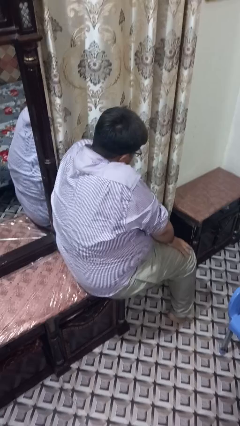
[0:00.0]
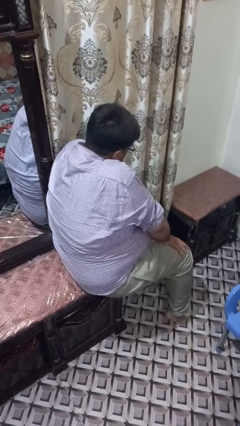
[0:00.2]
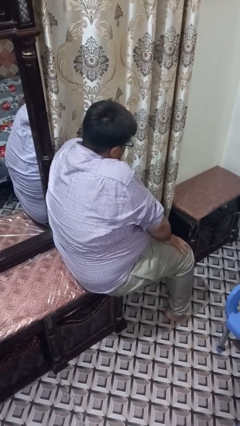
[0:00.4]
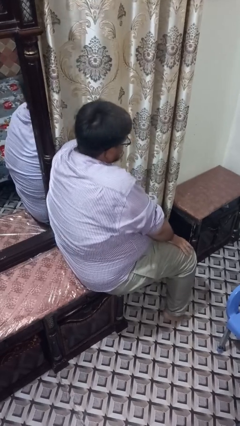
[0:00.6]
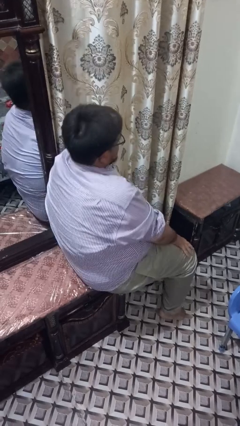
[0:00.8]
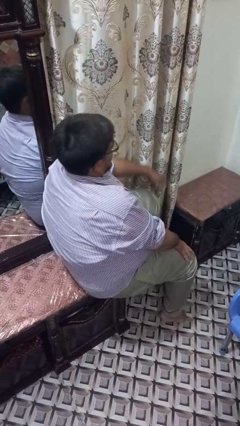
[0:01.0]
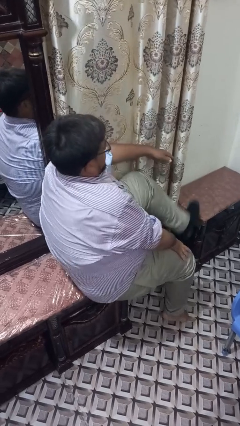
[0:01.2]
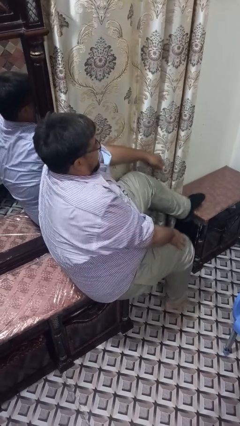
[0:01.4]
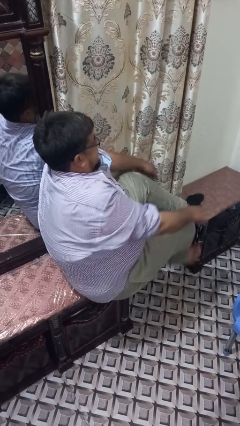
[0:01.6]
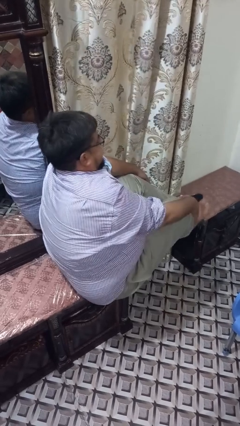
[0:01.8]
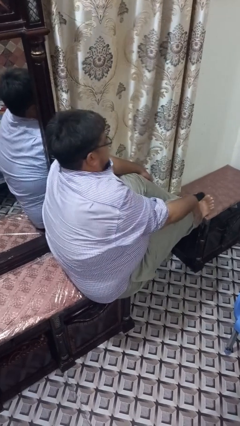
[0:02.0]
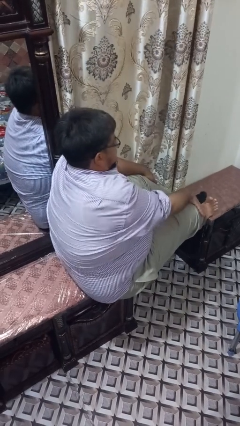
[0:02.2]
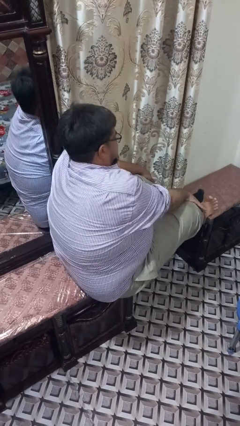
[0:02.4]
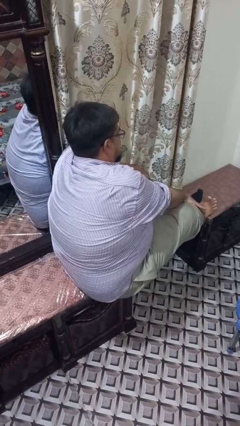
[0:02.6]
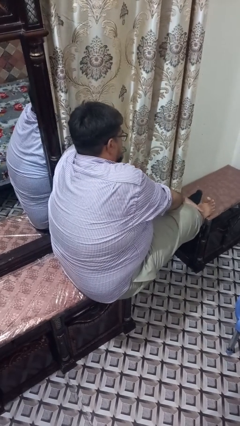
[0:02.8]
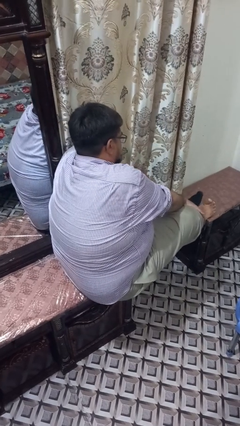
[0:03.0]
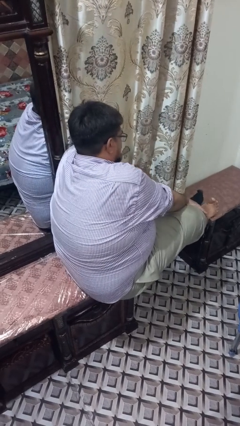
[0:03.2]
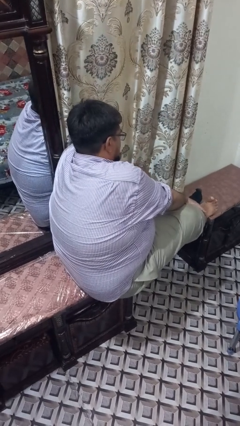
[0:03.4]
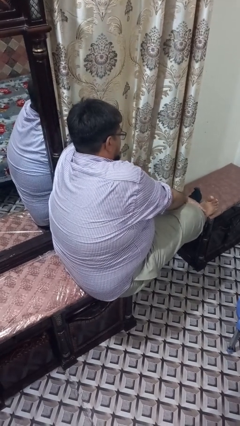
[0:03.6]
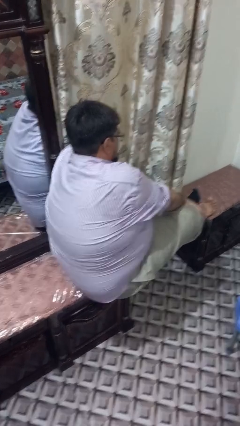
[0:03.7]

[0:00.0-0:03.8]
person puts feet up

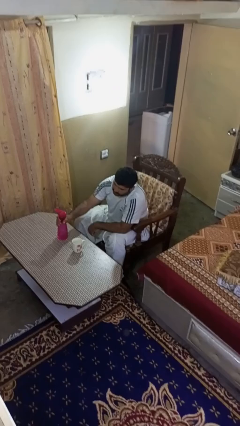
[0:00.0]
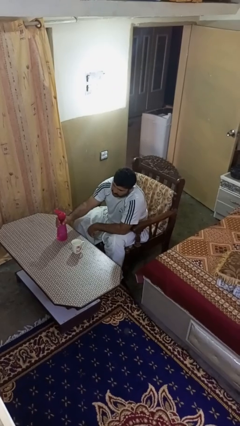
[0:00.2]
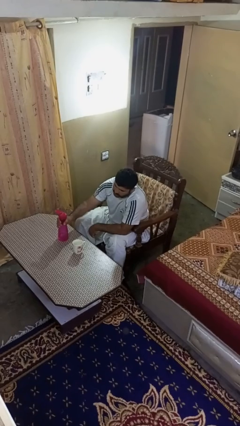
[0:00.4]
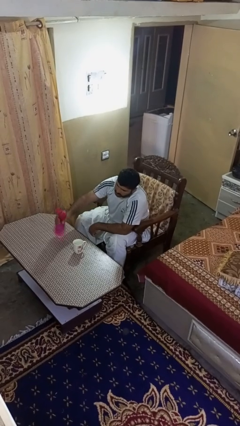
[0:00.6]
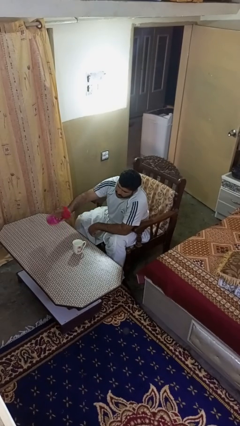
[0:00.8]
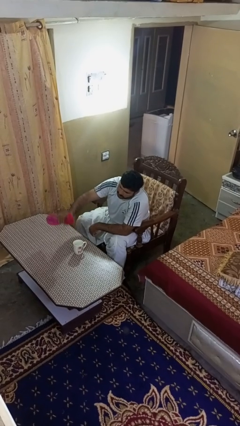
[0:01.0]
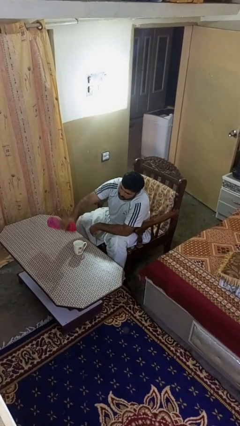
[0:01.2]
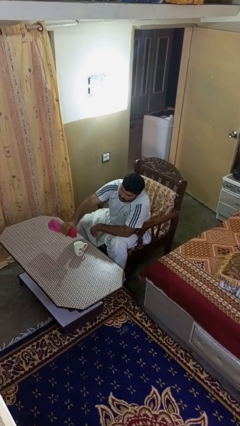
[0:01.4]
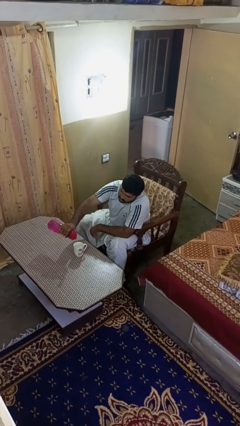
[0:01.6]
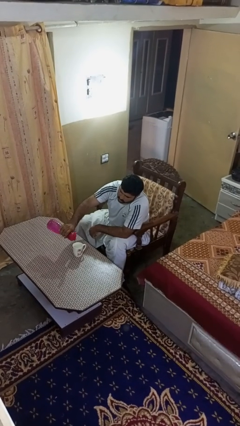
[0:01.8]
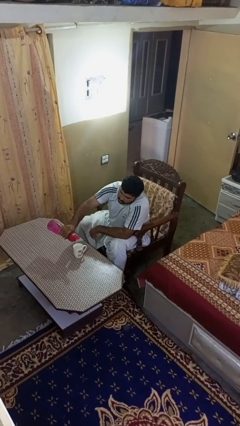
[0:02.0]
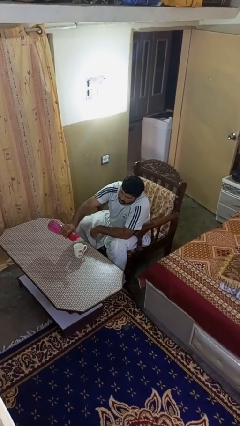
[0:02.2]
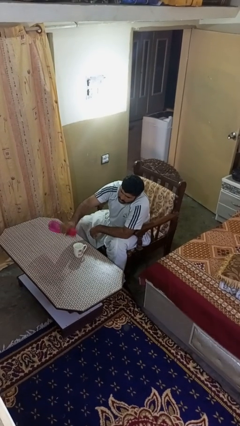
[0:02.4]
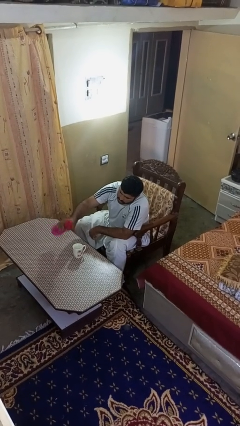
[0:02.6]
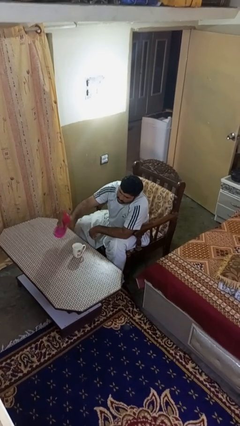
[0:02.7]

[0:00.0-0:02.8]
person pours liquid into cup

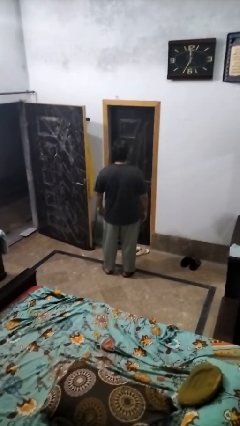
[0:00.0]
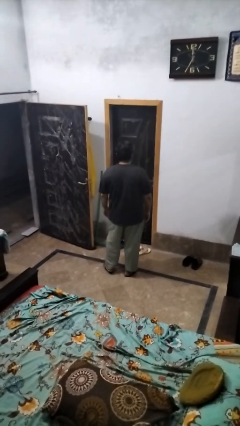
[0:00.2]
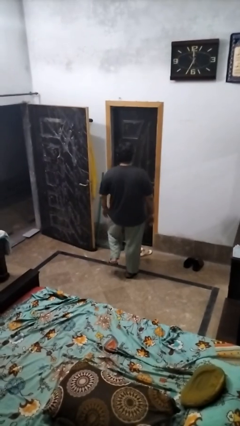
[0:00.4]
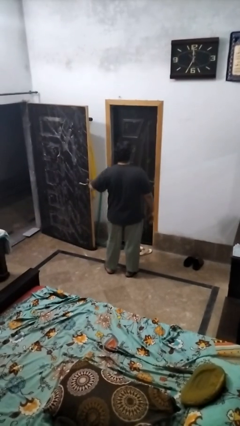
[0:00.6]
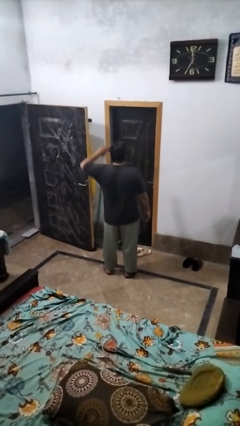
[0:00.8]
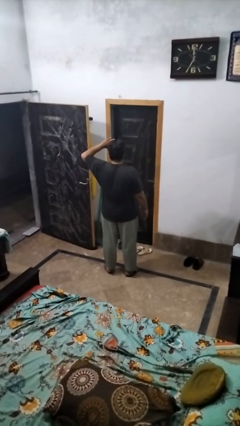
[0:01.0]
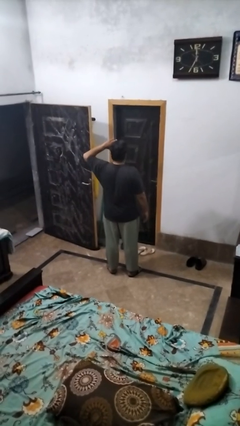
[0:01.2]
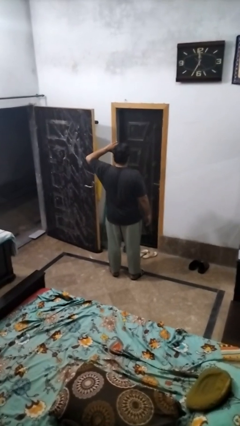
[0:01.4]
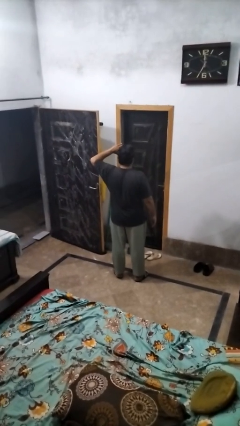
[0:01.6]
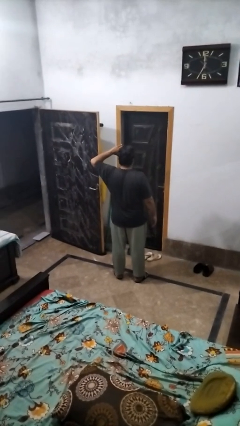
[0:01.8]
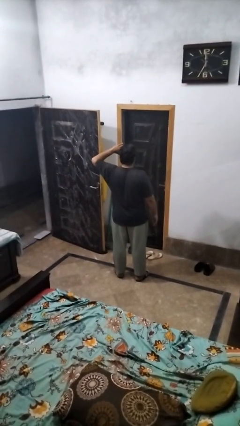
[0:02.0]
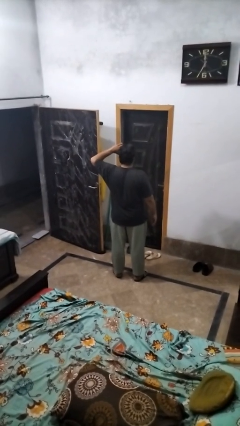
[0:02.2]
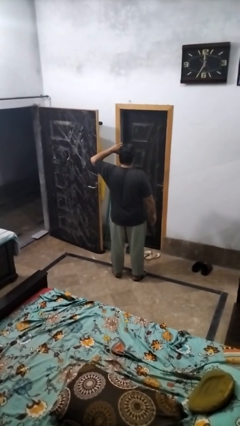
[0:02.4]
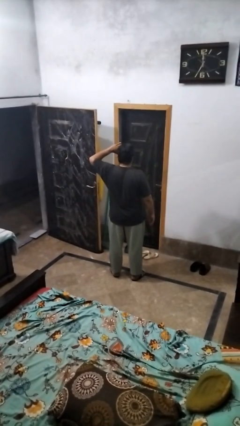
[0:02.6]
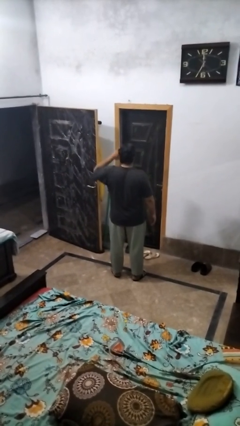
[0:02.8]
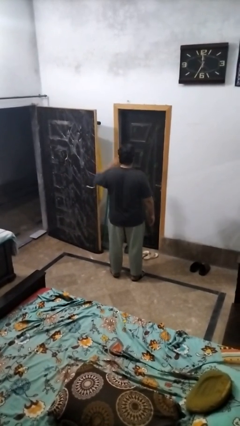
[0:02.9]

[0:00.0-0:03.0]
person salutes

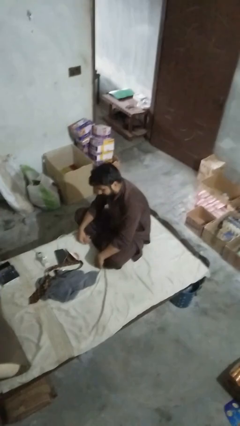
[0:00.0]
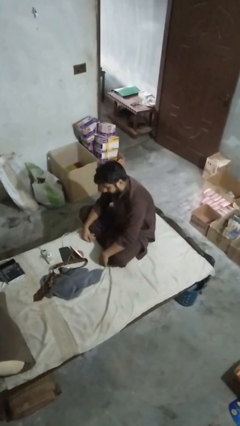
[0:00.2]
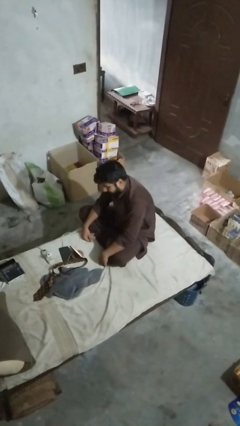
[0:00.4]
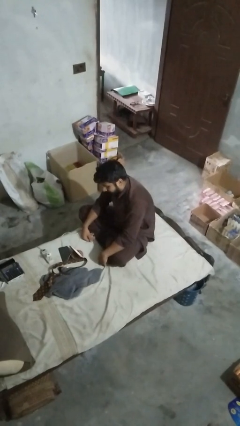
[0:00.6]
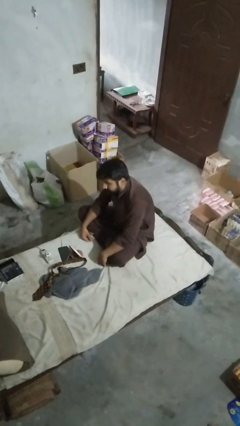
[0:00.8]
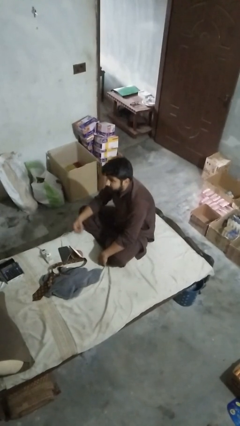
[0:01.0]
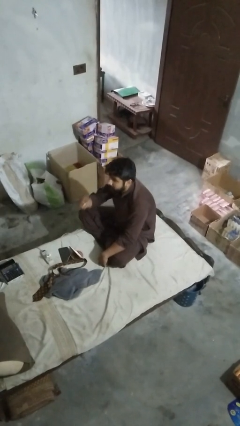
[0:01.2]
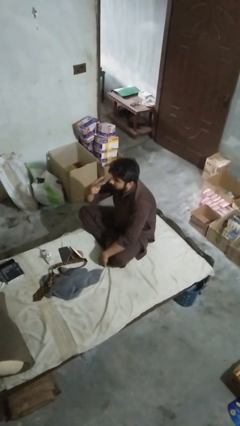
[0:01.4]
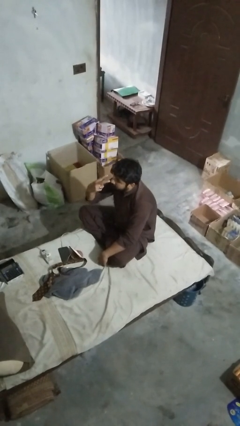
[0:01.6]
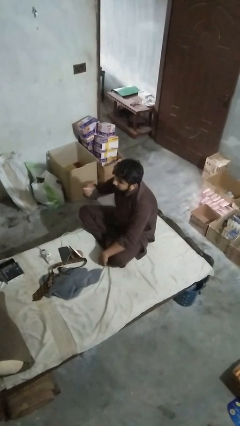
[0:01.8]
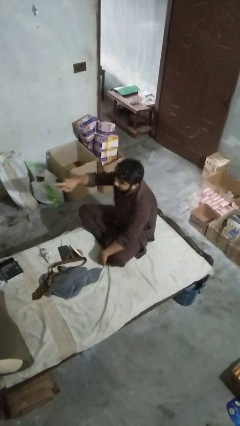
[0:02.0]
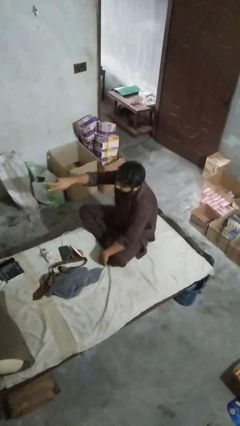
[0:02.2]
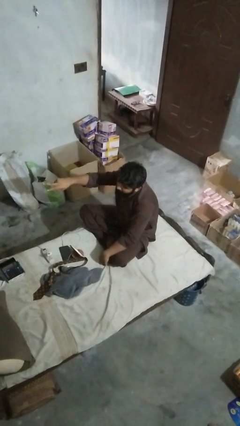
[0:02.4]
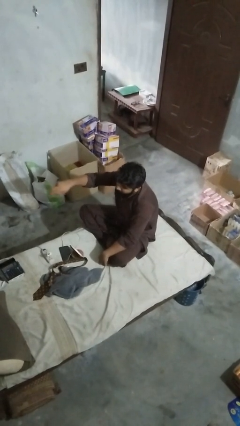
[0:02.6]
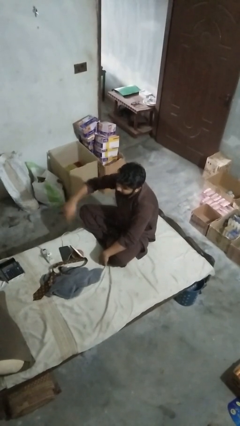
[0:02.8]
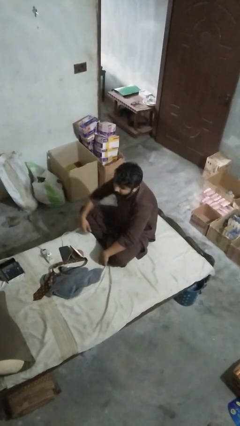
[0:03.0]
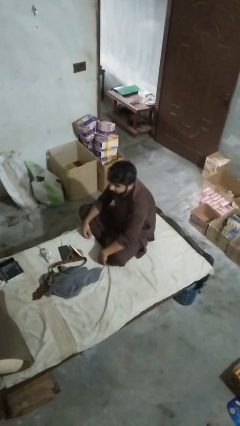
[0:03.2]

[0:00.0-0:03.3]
person gestures watch closely

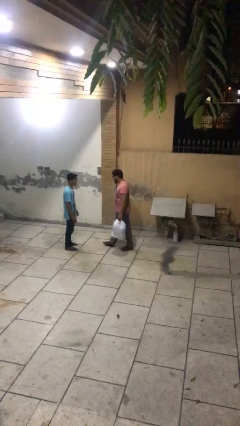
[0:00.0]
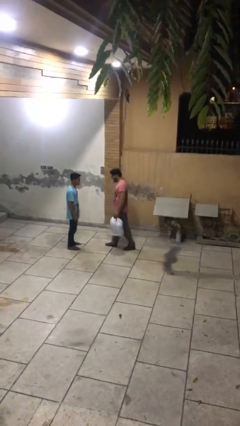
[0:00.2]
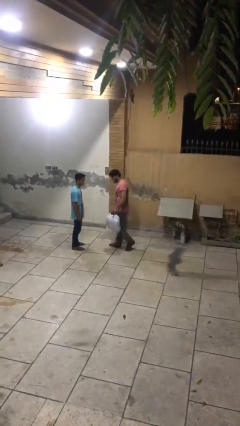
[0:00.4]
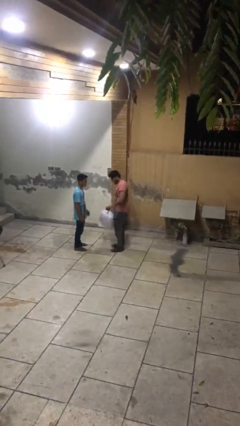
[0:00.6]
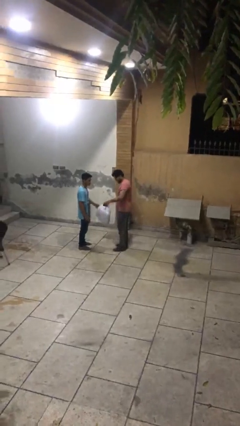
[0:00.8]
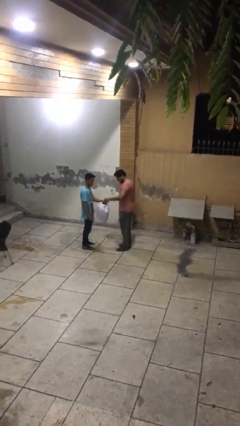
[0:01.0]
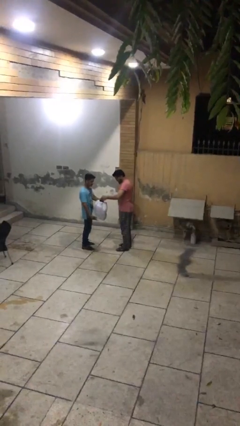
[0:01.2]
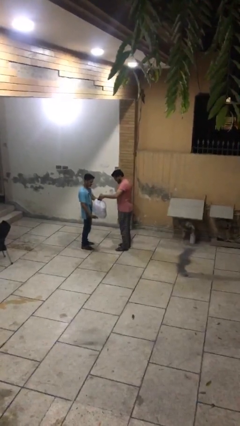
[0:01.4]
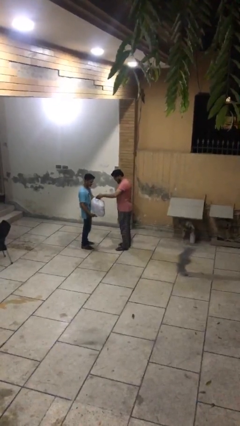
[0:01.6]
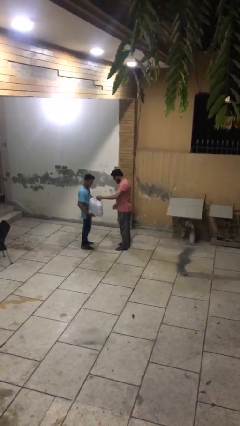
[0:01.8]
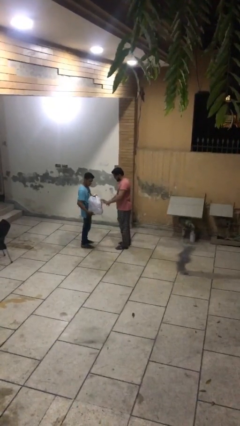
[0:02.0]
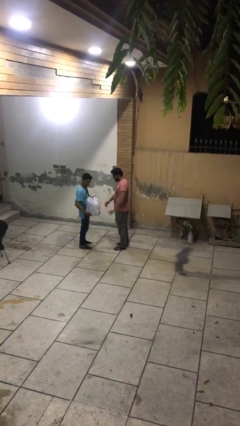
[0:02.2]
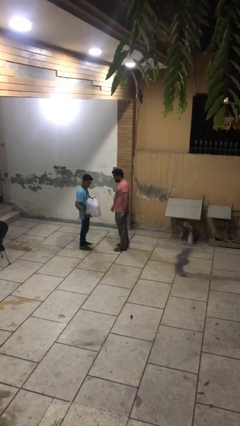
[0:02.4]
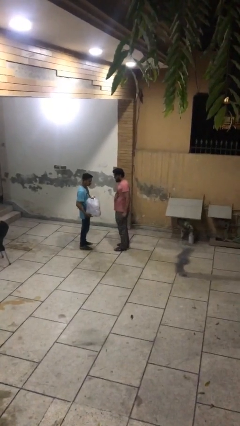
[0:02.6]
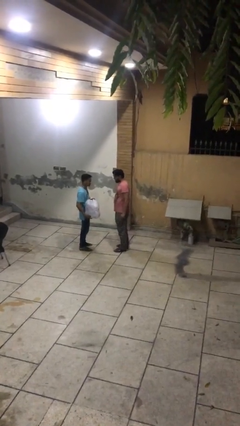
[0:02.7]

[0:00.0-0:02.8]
person transfers object to person

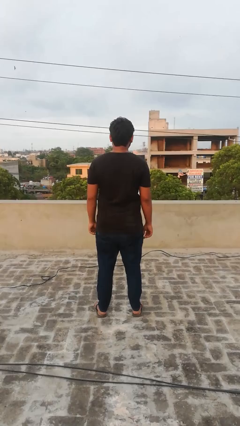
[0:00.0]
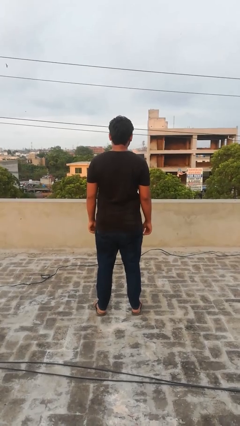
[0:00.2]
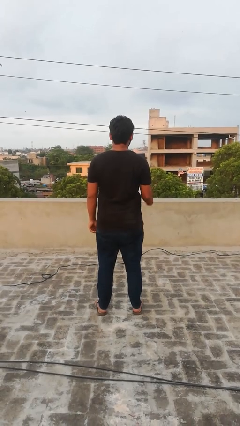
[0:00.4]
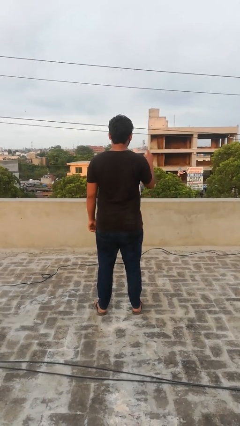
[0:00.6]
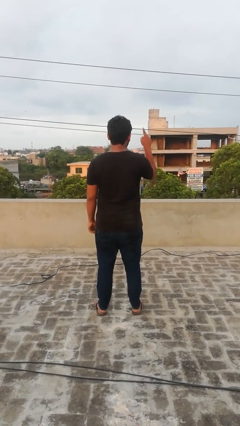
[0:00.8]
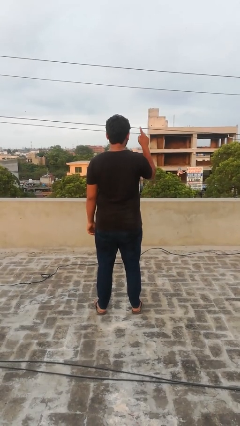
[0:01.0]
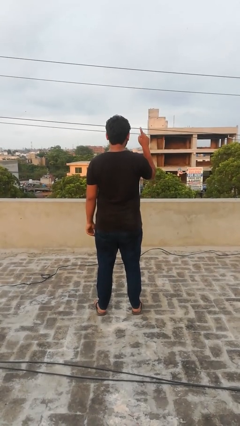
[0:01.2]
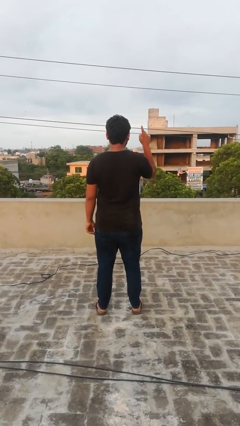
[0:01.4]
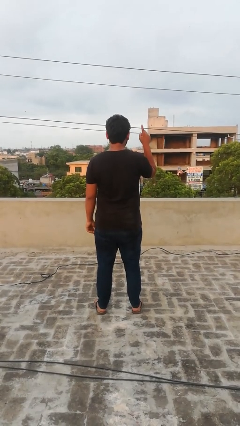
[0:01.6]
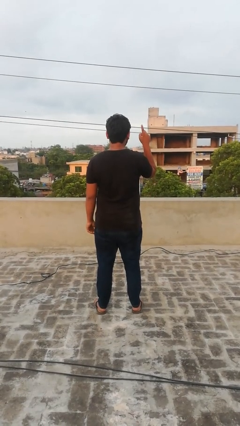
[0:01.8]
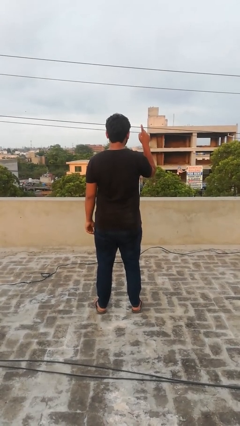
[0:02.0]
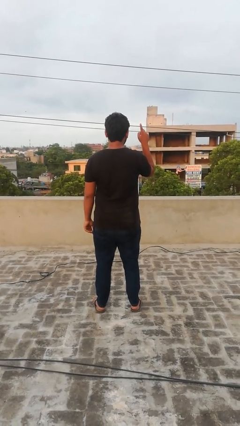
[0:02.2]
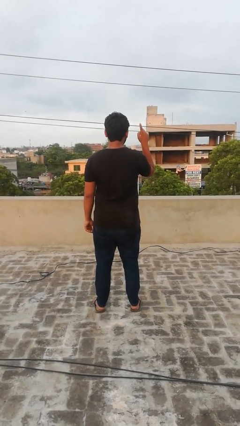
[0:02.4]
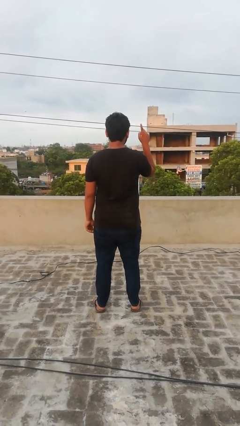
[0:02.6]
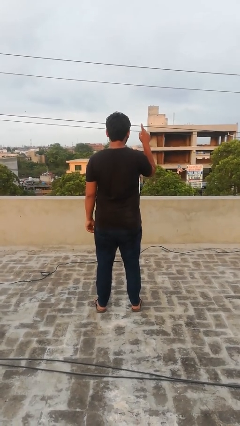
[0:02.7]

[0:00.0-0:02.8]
person gestures number one
